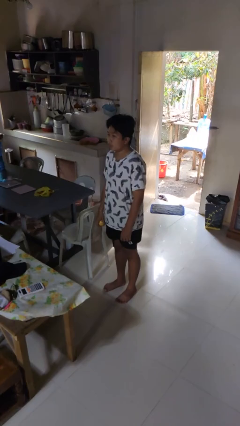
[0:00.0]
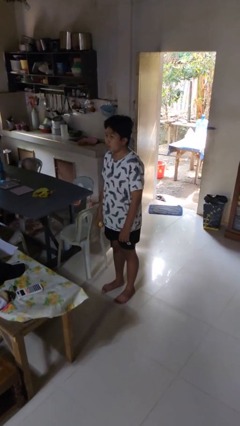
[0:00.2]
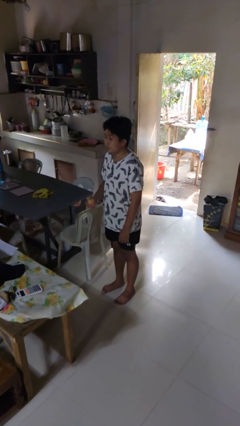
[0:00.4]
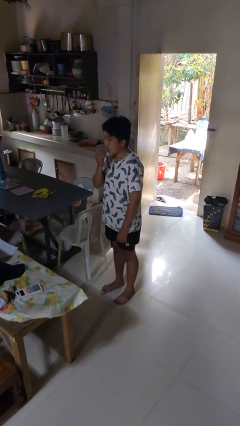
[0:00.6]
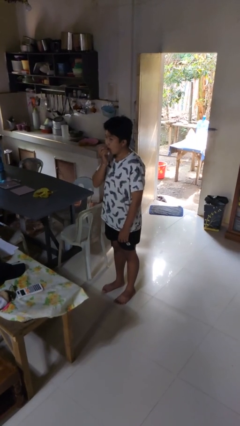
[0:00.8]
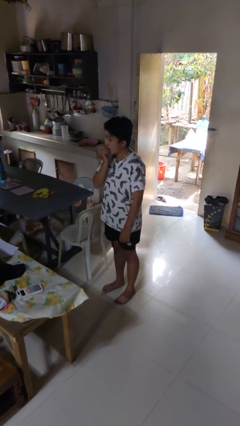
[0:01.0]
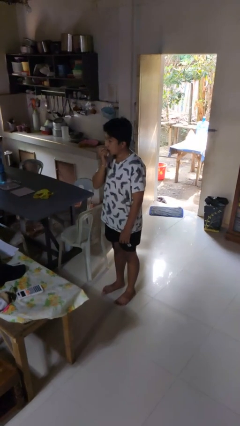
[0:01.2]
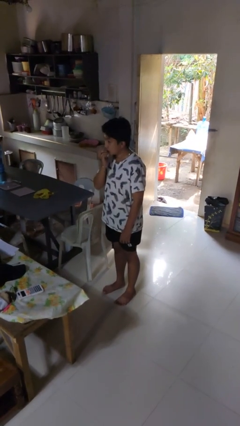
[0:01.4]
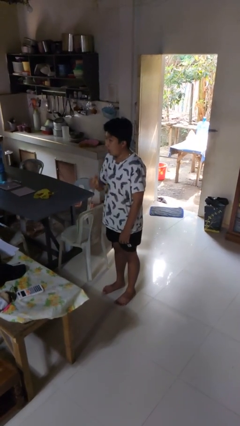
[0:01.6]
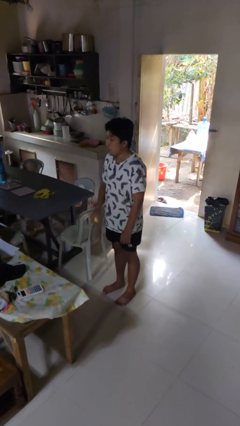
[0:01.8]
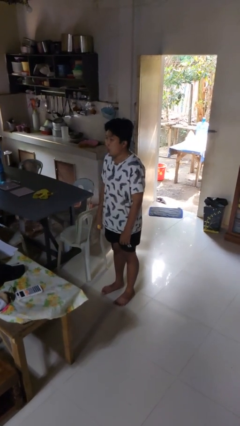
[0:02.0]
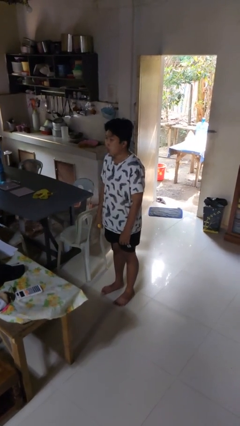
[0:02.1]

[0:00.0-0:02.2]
person eats apple

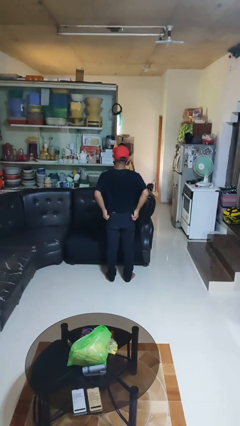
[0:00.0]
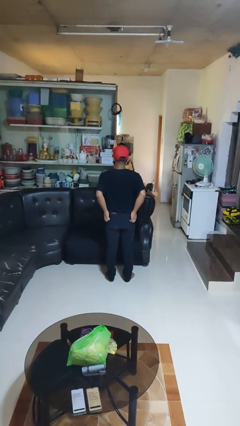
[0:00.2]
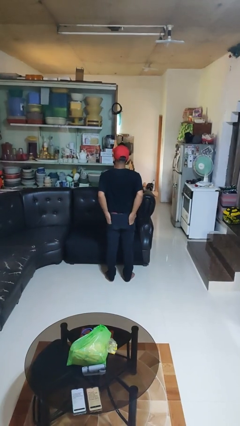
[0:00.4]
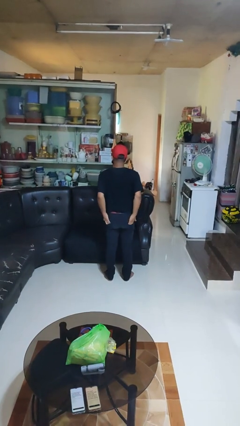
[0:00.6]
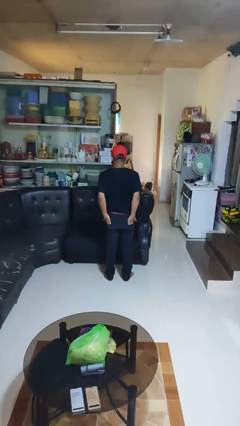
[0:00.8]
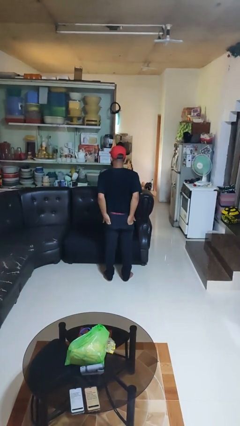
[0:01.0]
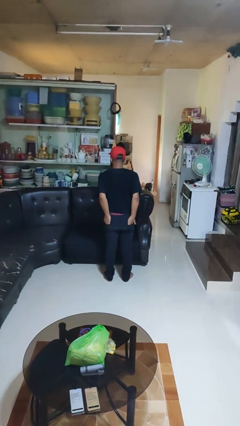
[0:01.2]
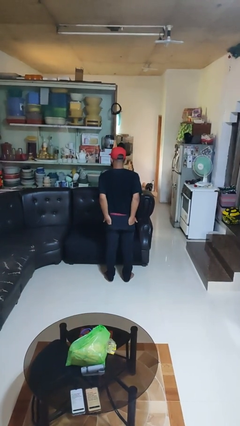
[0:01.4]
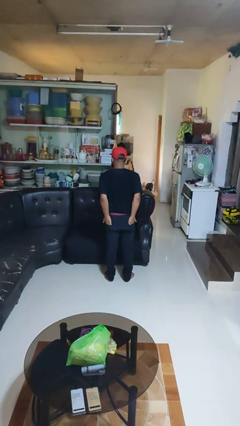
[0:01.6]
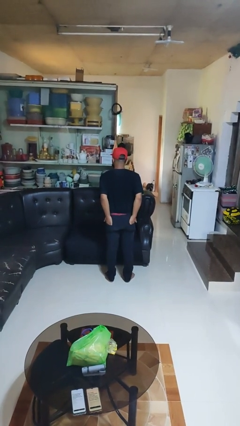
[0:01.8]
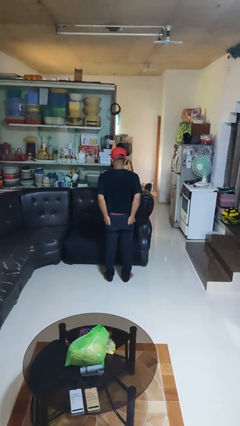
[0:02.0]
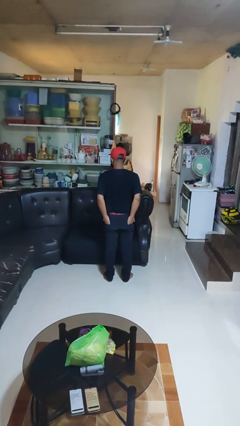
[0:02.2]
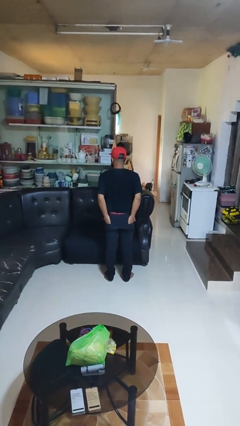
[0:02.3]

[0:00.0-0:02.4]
person puts hands in back pockets

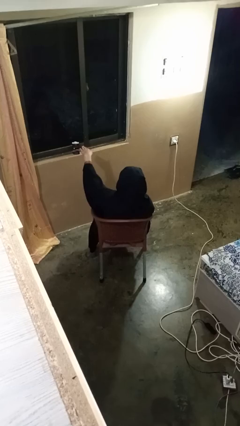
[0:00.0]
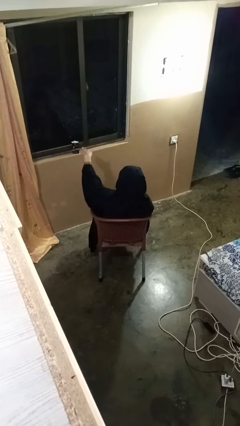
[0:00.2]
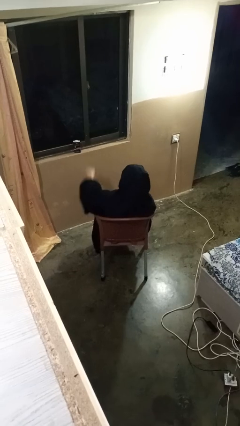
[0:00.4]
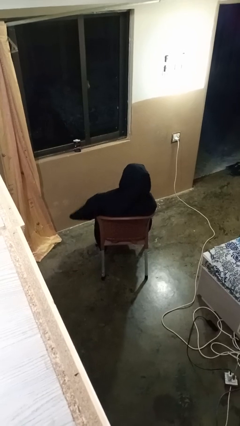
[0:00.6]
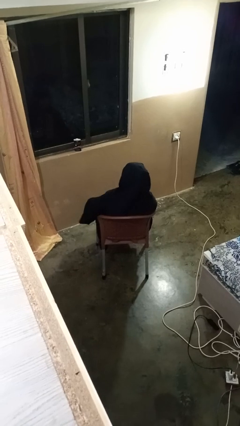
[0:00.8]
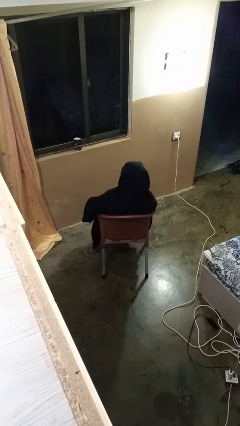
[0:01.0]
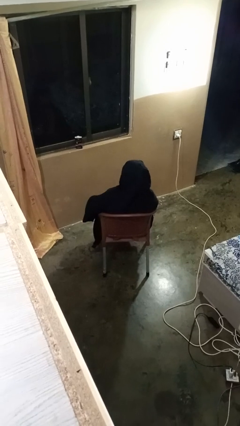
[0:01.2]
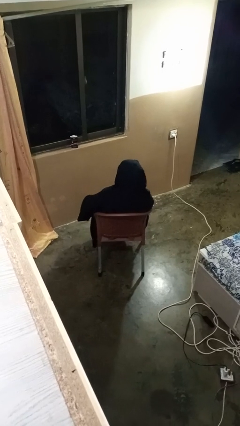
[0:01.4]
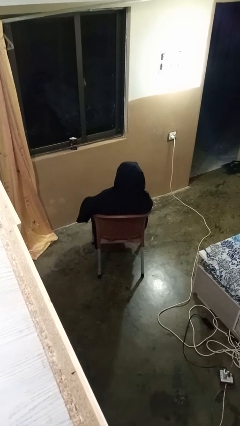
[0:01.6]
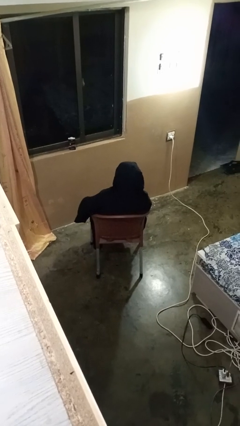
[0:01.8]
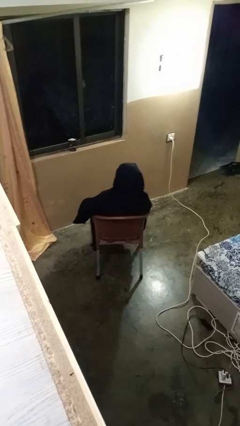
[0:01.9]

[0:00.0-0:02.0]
person gestures swipe down

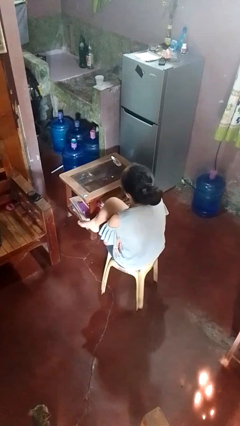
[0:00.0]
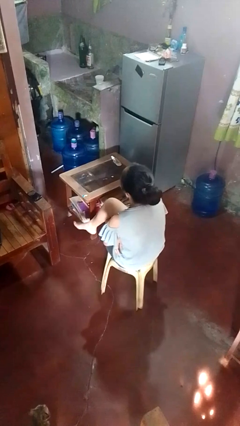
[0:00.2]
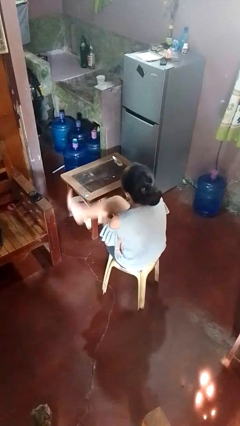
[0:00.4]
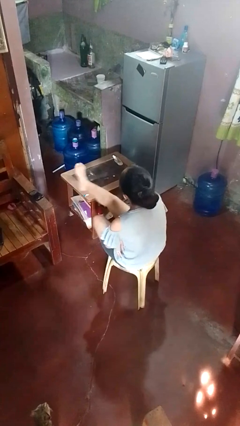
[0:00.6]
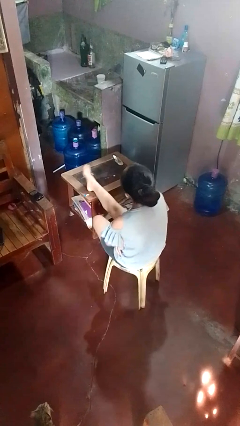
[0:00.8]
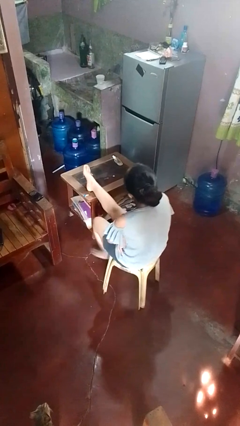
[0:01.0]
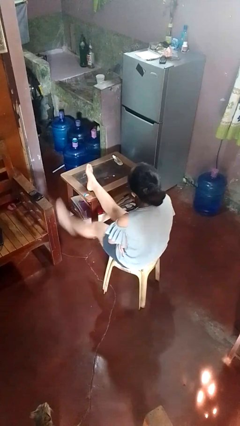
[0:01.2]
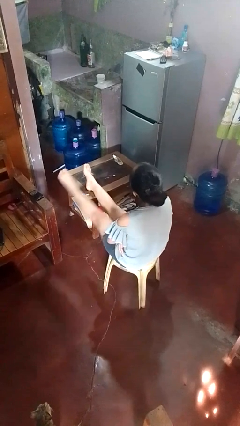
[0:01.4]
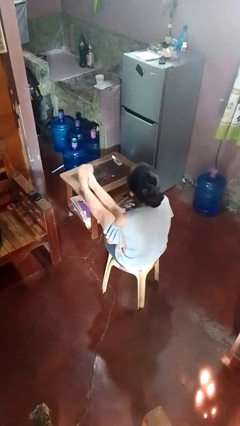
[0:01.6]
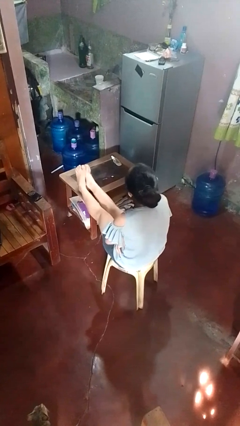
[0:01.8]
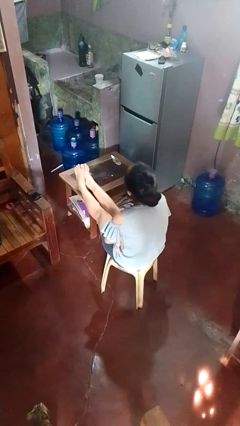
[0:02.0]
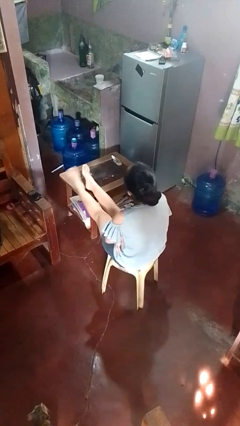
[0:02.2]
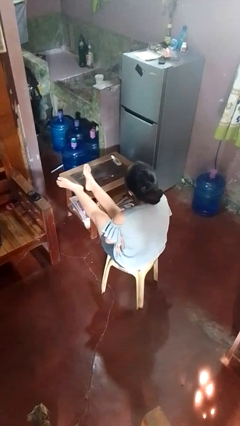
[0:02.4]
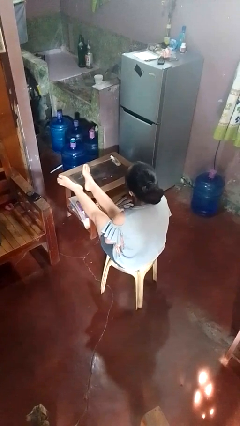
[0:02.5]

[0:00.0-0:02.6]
person puts feet up

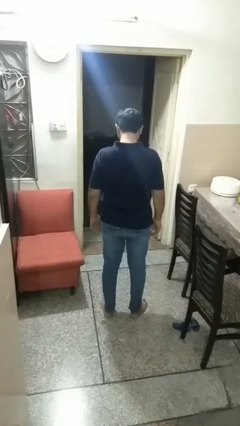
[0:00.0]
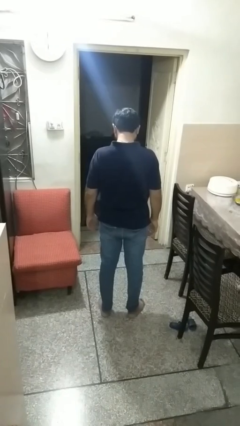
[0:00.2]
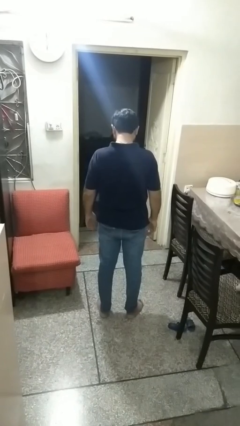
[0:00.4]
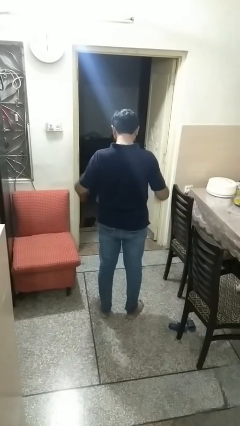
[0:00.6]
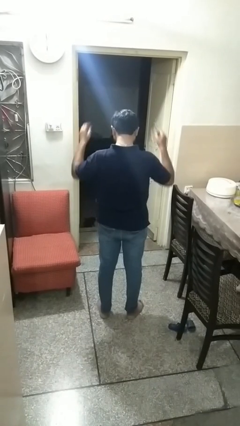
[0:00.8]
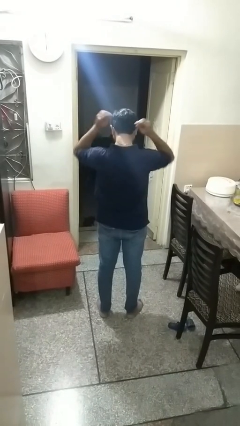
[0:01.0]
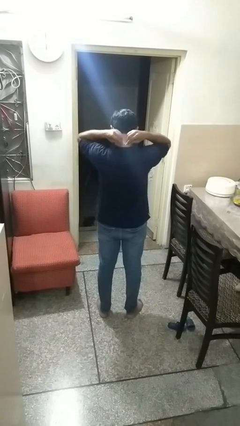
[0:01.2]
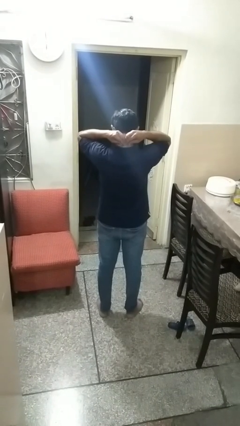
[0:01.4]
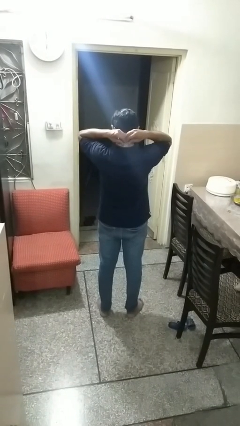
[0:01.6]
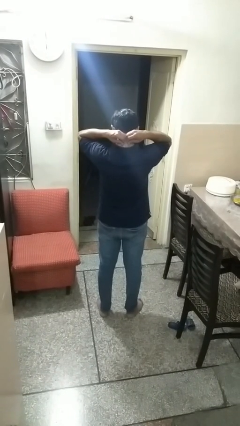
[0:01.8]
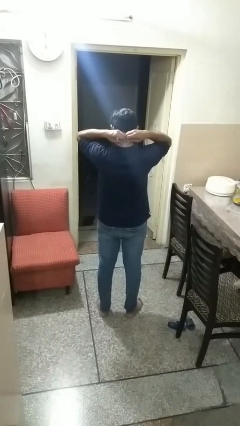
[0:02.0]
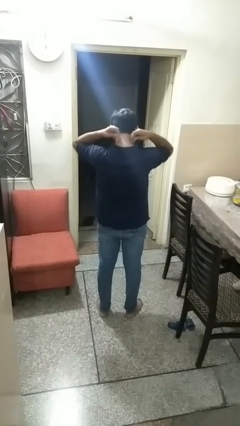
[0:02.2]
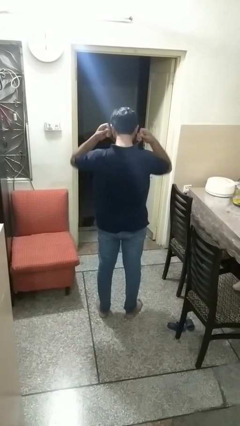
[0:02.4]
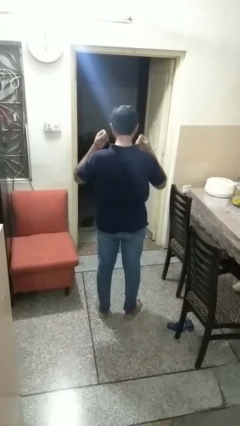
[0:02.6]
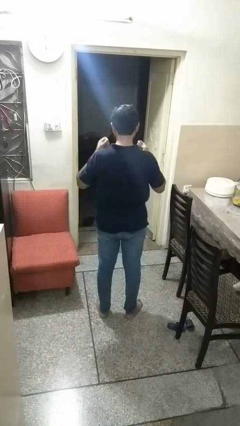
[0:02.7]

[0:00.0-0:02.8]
person takes off necklace

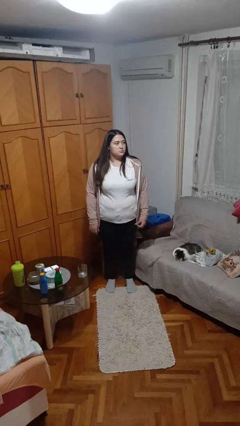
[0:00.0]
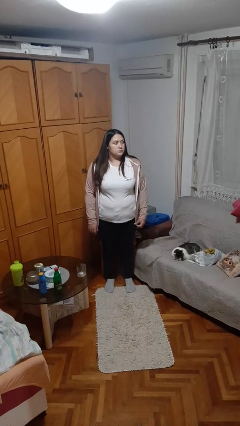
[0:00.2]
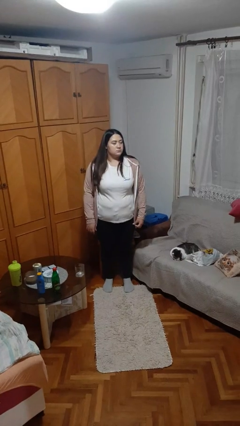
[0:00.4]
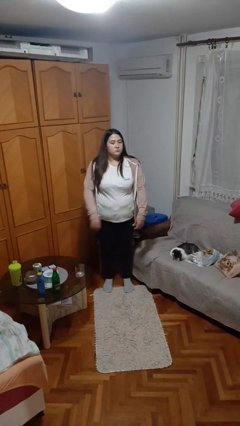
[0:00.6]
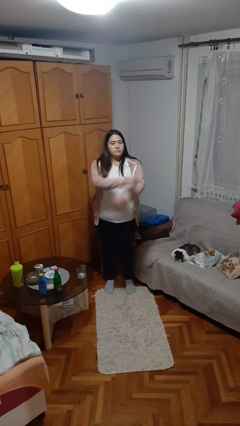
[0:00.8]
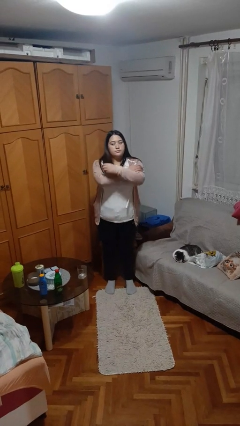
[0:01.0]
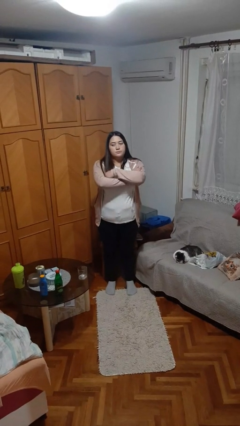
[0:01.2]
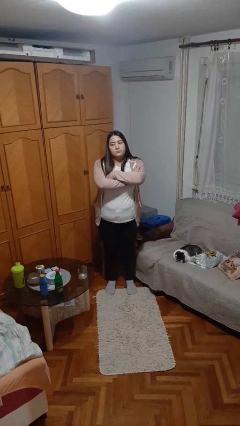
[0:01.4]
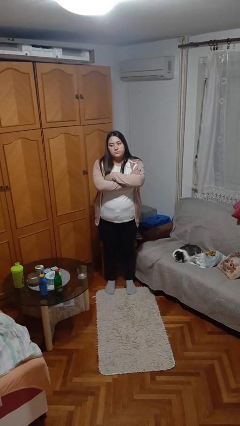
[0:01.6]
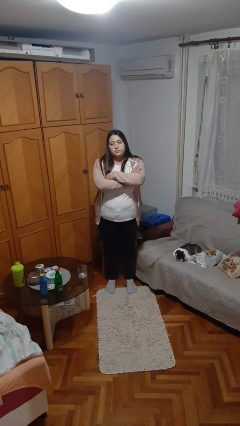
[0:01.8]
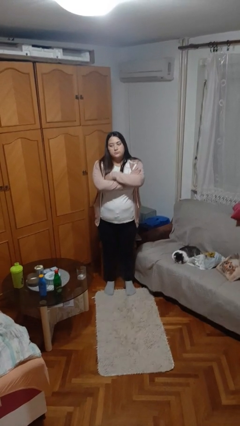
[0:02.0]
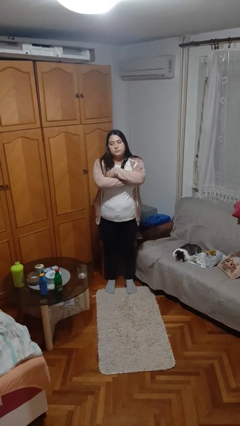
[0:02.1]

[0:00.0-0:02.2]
person crosses arms

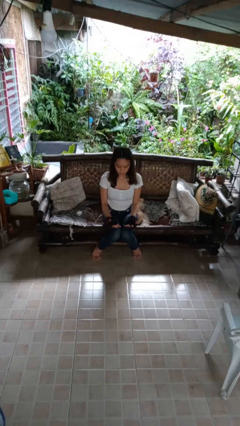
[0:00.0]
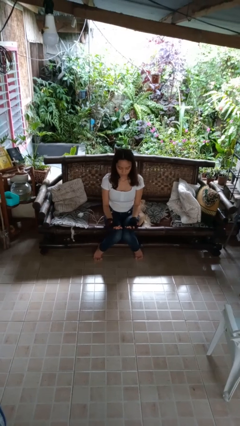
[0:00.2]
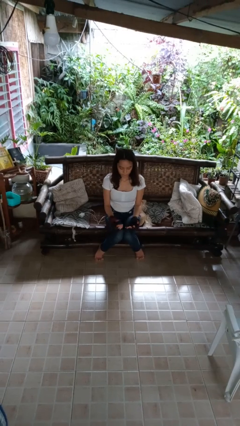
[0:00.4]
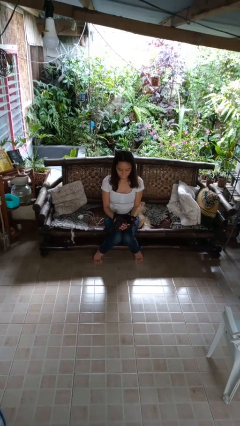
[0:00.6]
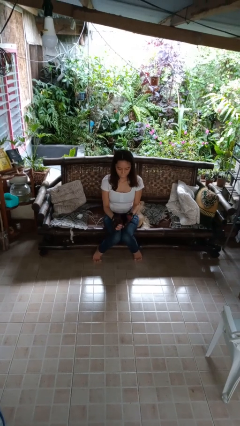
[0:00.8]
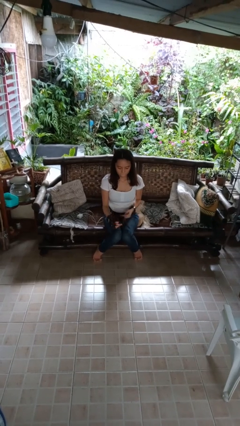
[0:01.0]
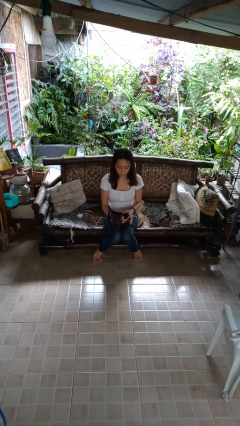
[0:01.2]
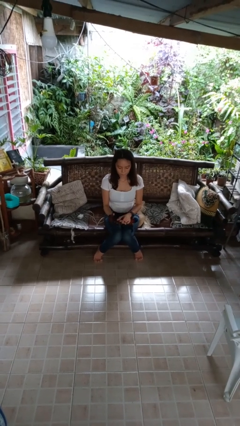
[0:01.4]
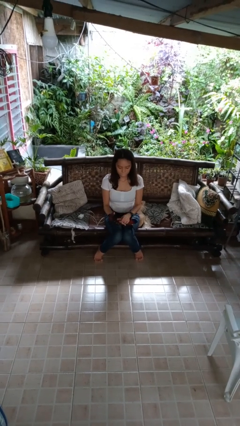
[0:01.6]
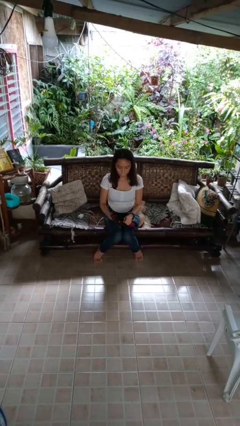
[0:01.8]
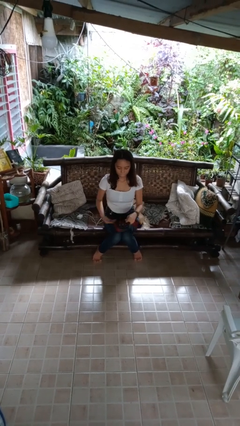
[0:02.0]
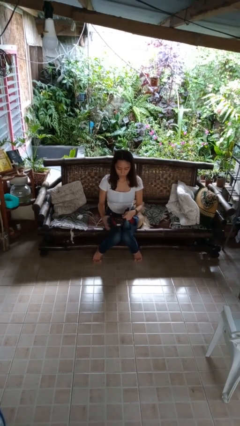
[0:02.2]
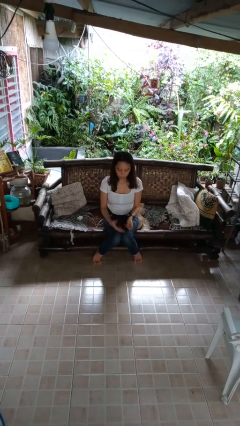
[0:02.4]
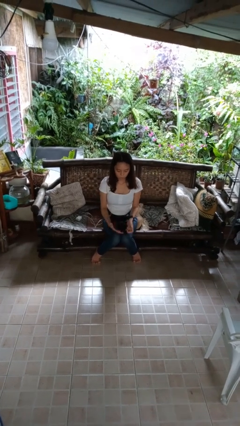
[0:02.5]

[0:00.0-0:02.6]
person takes off gloves
